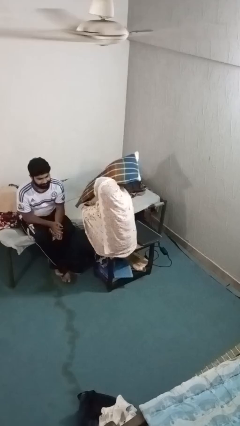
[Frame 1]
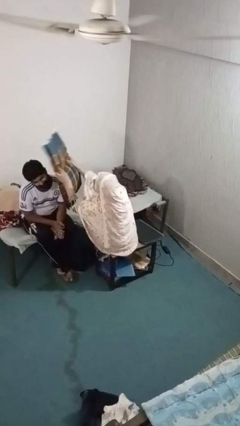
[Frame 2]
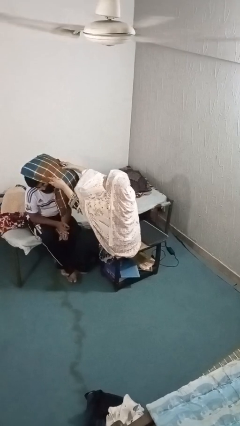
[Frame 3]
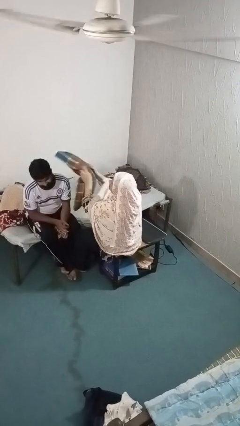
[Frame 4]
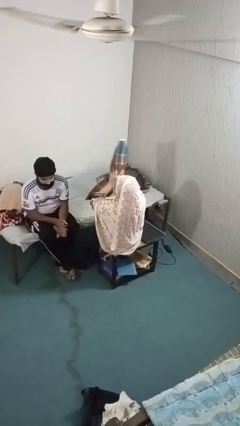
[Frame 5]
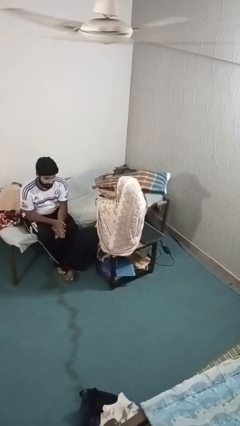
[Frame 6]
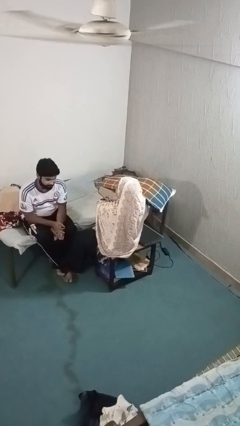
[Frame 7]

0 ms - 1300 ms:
person hits person with pillow

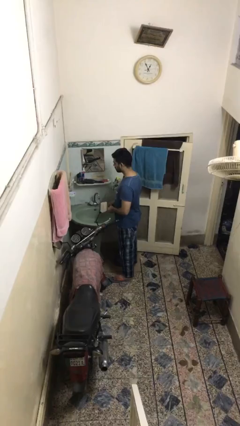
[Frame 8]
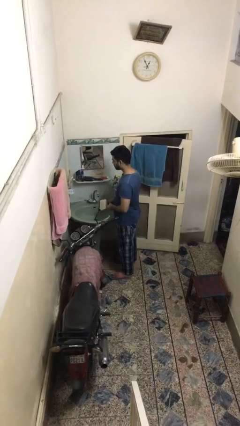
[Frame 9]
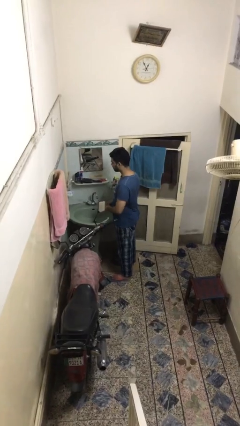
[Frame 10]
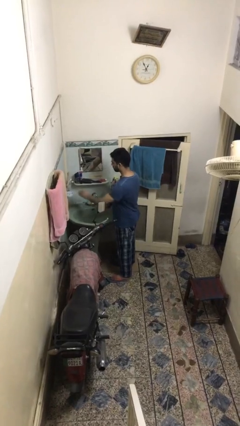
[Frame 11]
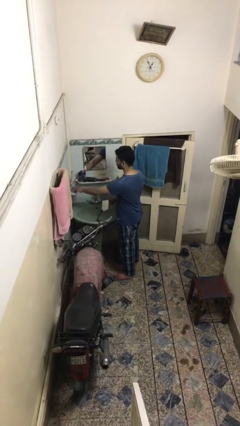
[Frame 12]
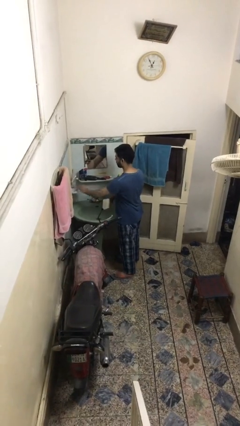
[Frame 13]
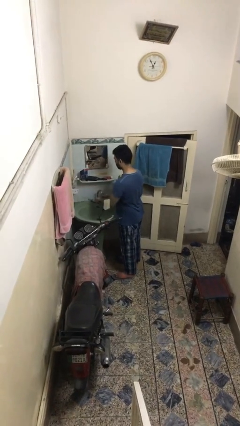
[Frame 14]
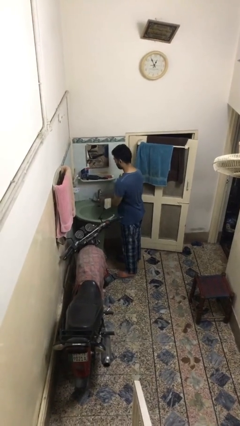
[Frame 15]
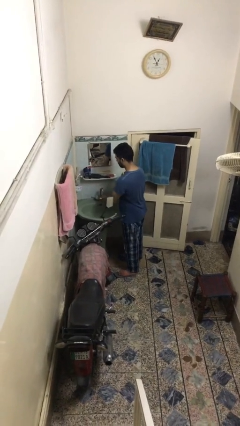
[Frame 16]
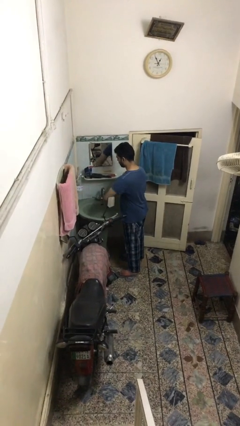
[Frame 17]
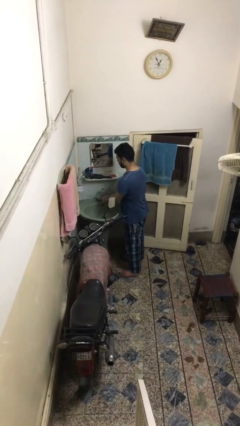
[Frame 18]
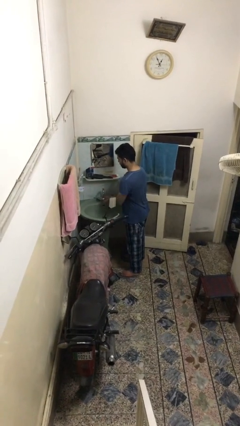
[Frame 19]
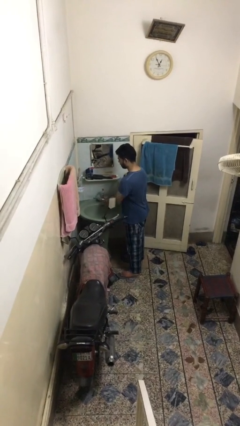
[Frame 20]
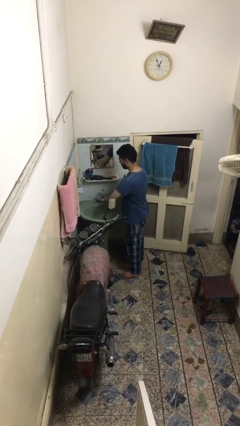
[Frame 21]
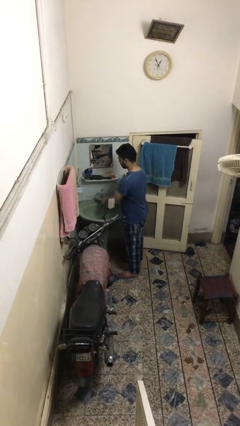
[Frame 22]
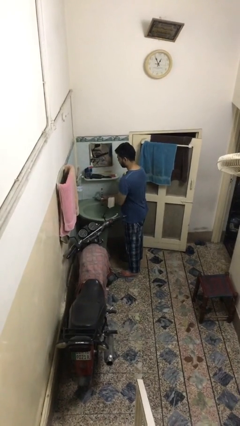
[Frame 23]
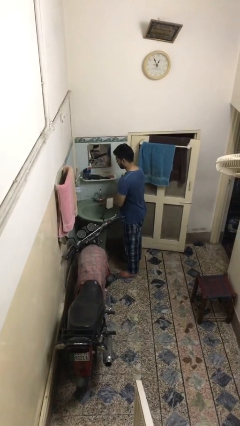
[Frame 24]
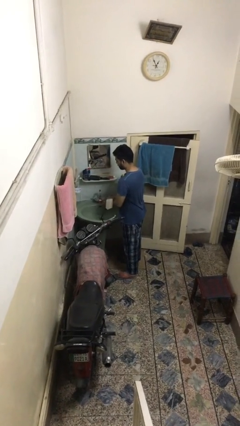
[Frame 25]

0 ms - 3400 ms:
person washes hands

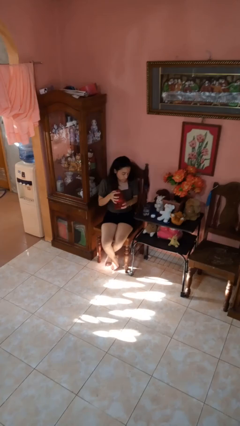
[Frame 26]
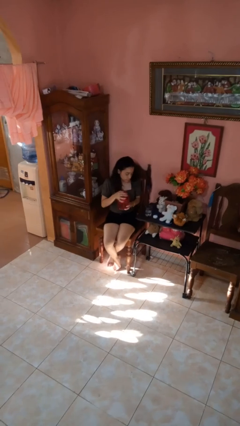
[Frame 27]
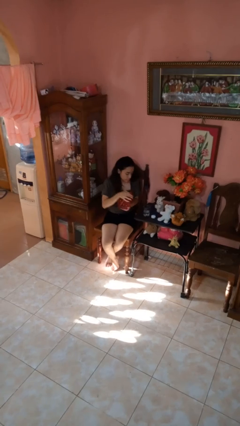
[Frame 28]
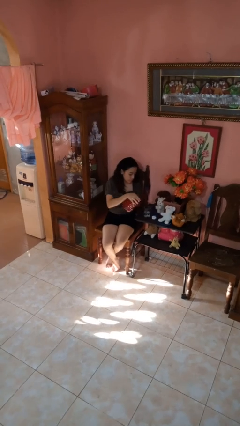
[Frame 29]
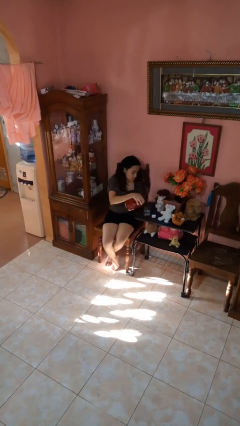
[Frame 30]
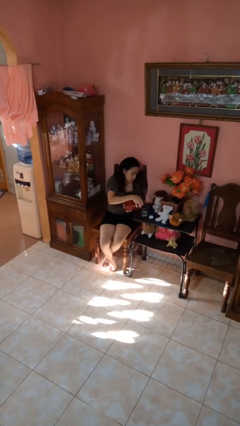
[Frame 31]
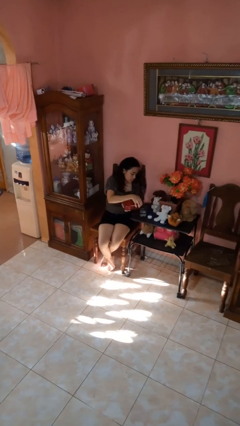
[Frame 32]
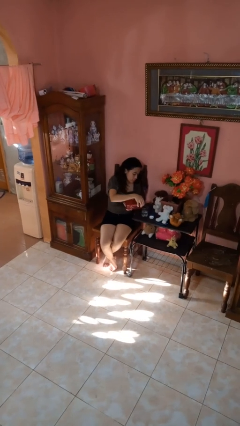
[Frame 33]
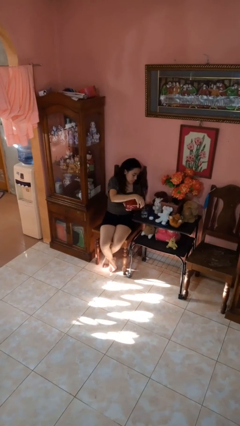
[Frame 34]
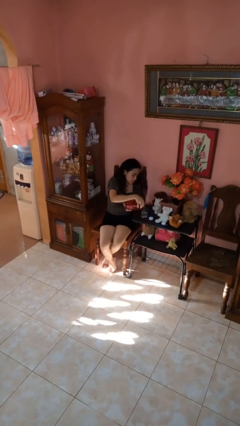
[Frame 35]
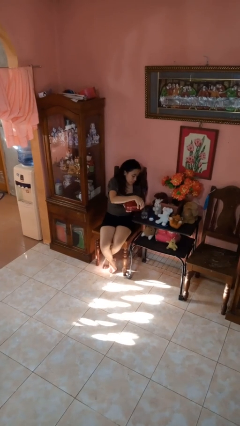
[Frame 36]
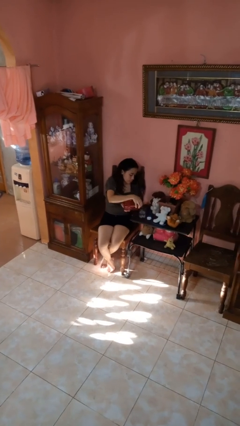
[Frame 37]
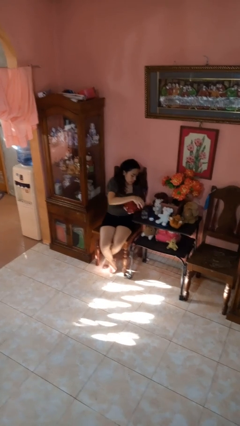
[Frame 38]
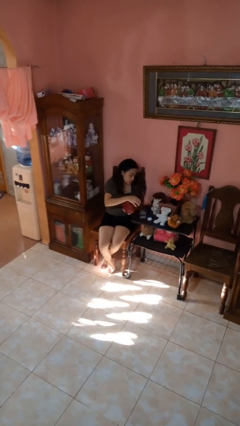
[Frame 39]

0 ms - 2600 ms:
person pours liquid into cup

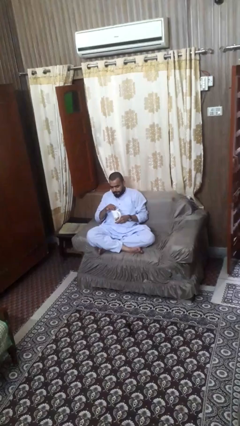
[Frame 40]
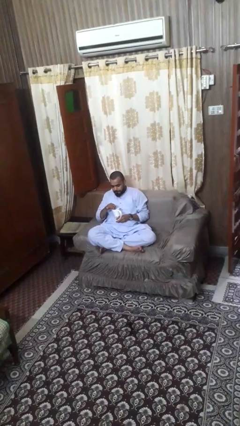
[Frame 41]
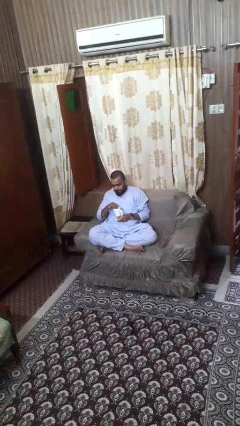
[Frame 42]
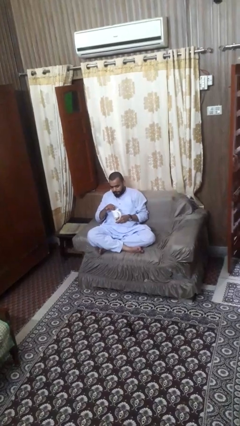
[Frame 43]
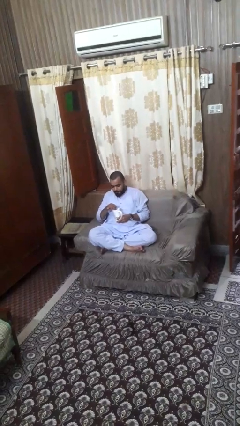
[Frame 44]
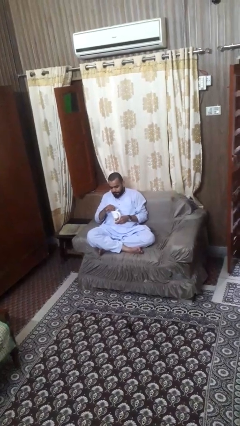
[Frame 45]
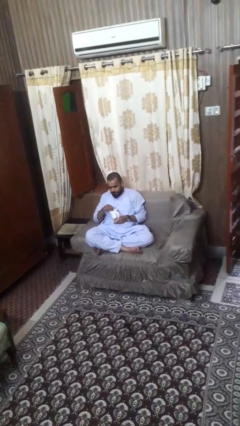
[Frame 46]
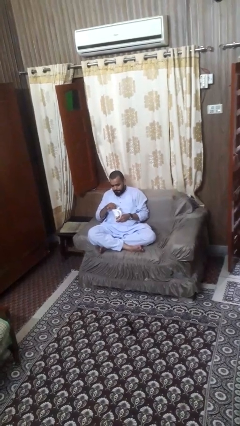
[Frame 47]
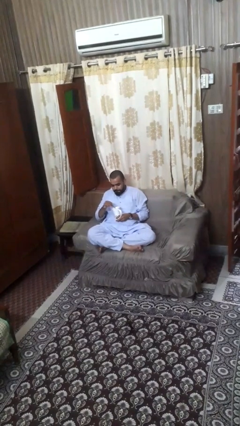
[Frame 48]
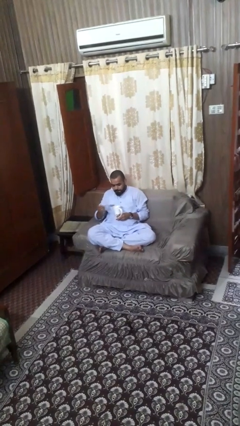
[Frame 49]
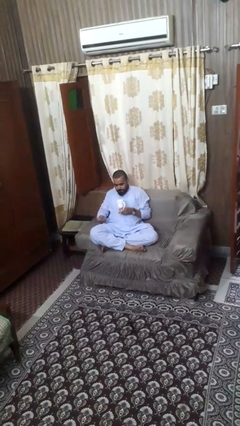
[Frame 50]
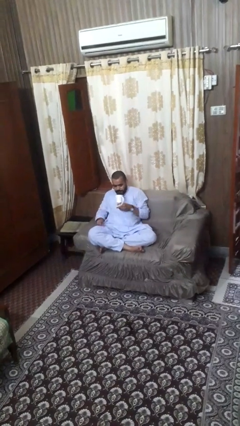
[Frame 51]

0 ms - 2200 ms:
person stirs mug

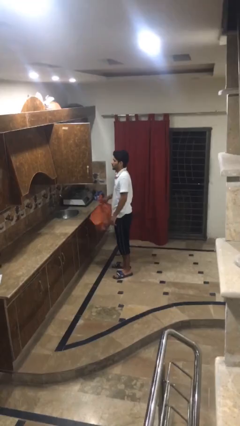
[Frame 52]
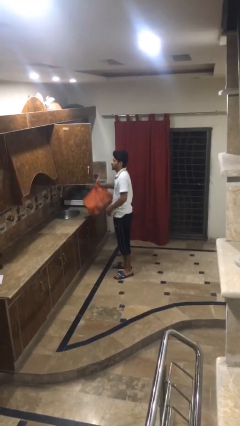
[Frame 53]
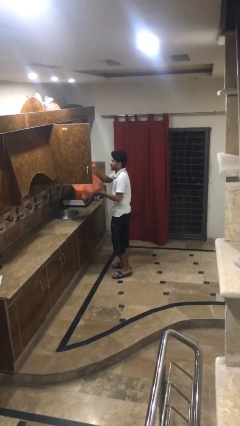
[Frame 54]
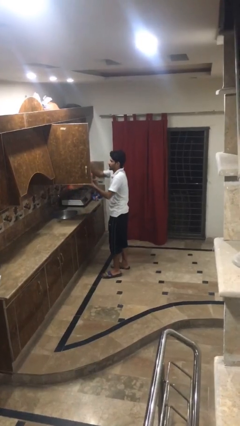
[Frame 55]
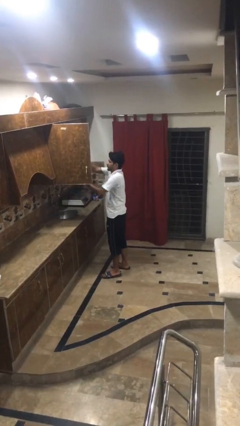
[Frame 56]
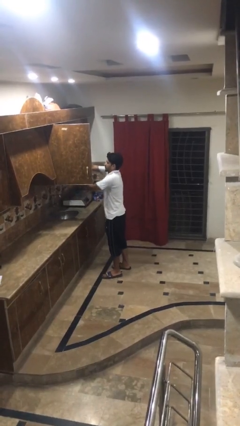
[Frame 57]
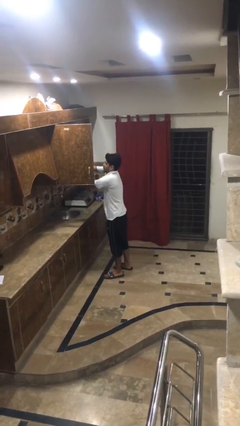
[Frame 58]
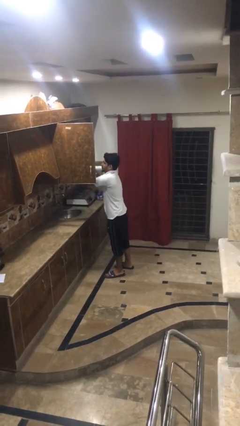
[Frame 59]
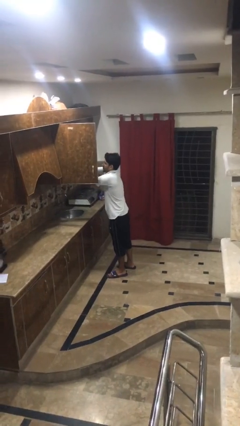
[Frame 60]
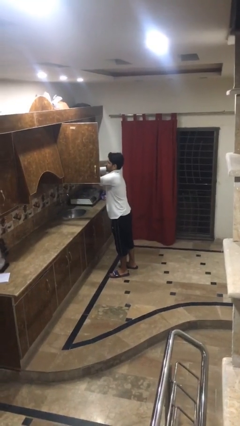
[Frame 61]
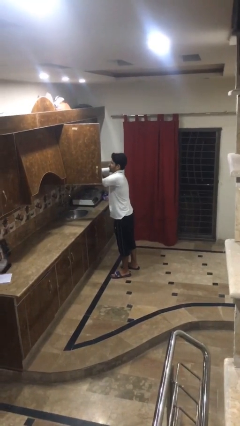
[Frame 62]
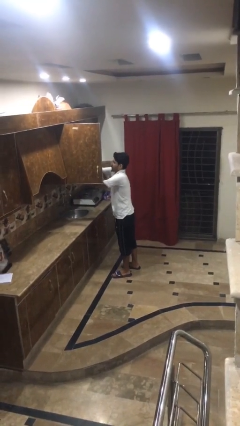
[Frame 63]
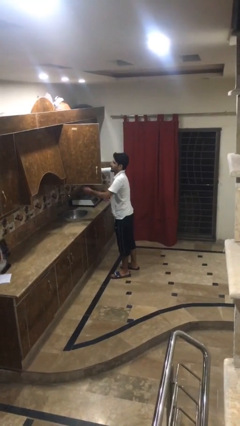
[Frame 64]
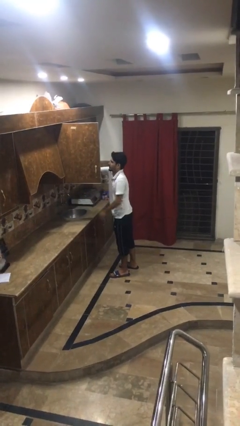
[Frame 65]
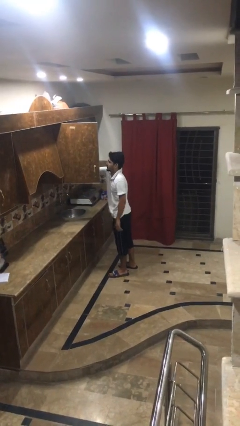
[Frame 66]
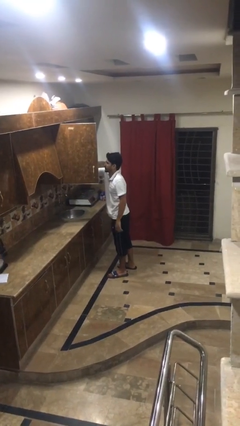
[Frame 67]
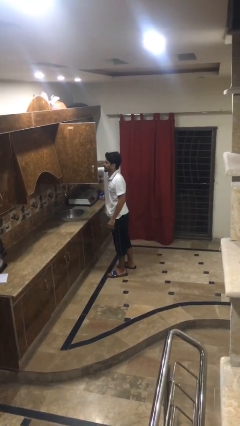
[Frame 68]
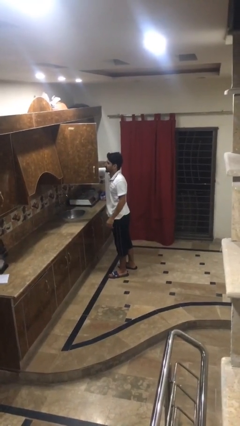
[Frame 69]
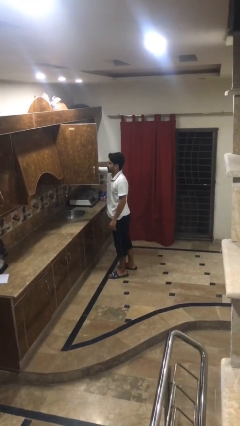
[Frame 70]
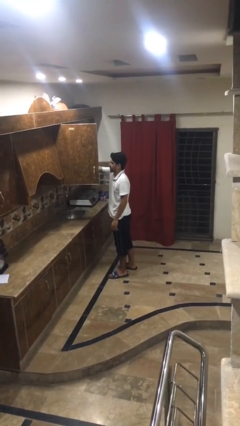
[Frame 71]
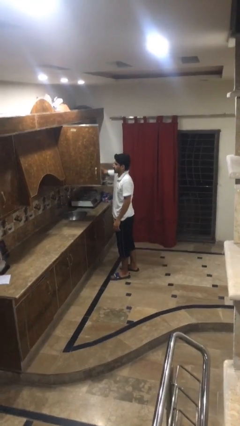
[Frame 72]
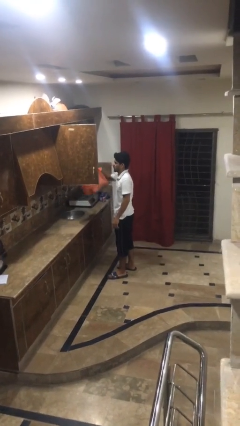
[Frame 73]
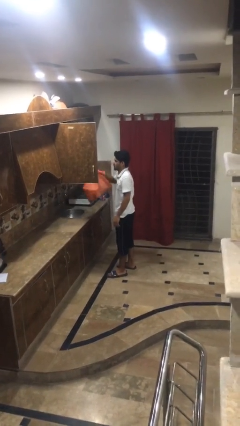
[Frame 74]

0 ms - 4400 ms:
person loads groceries into cabinet

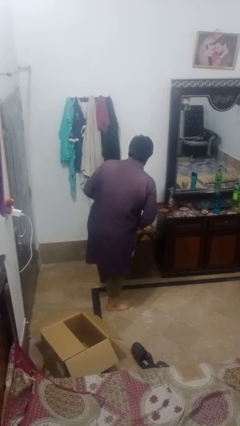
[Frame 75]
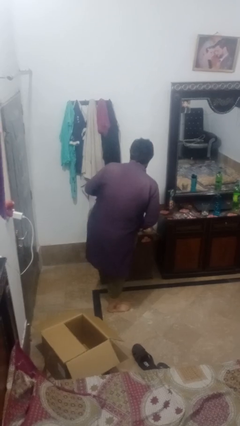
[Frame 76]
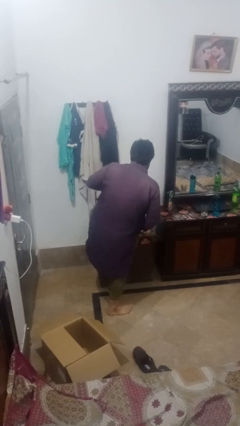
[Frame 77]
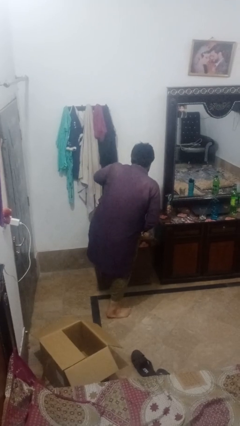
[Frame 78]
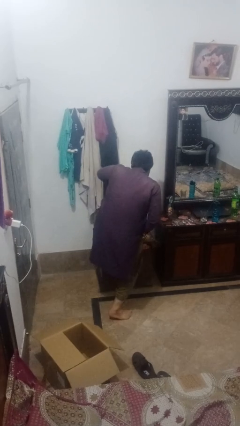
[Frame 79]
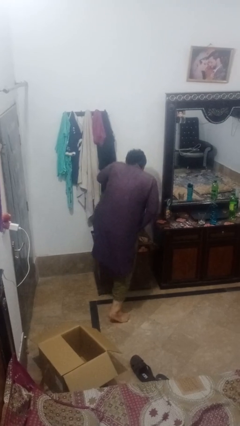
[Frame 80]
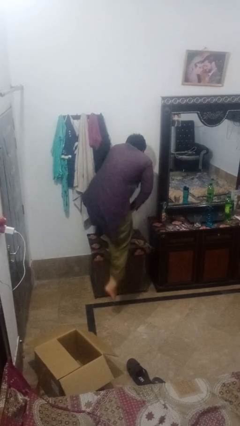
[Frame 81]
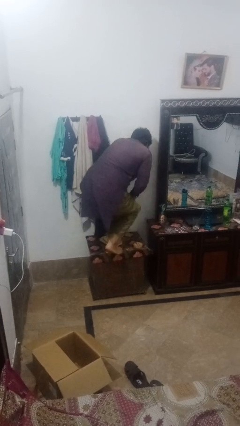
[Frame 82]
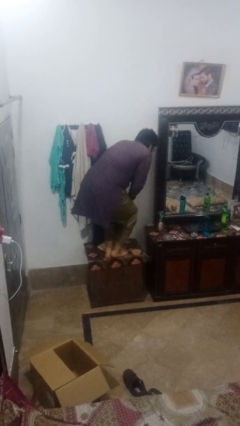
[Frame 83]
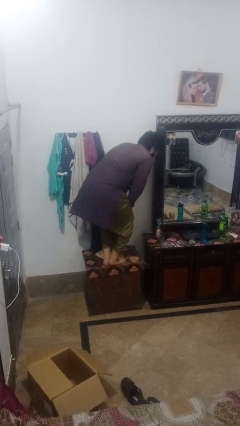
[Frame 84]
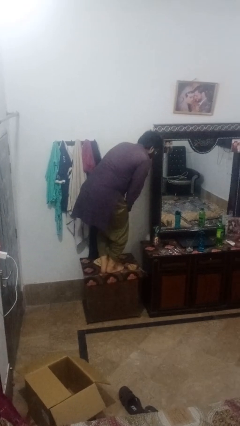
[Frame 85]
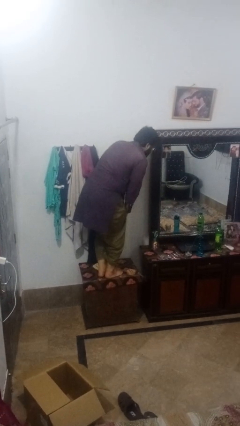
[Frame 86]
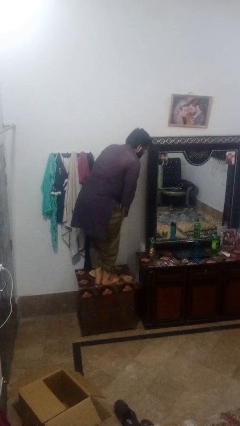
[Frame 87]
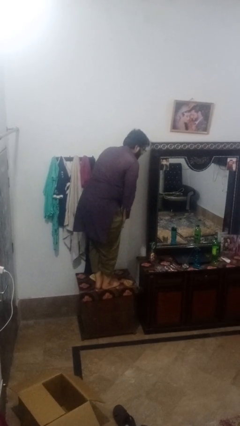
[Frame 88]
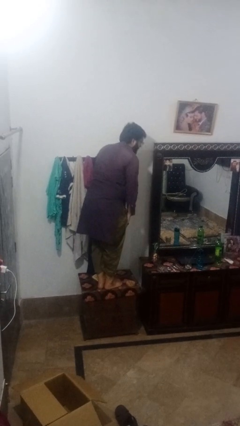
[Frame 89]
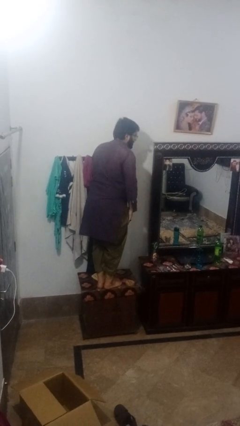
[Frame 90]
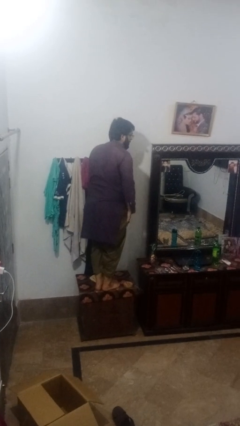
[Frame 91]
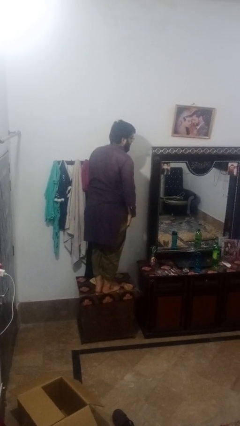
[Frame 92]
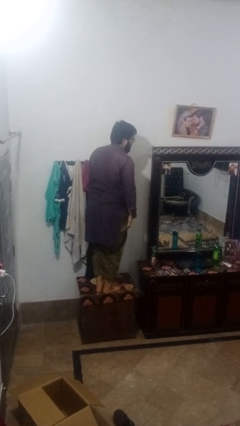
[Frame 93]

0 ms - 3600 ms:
person climbs on table
